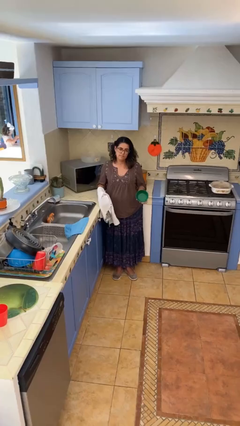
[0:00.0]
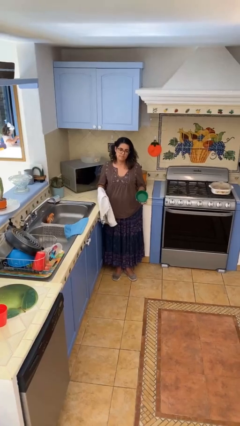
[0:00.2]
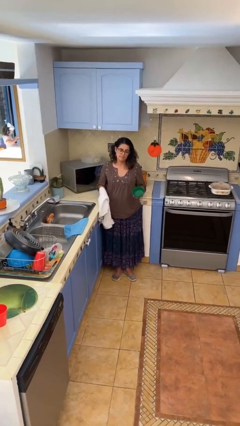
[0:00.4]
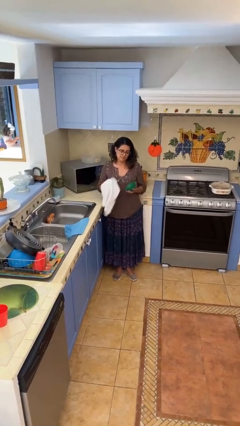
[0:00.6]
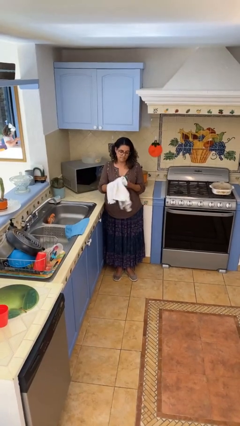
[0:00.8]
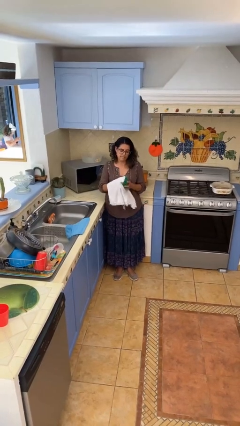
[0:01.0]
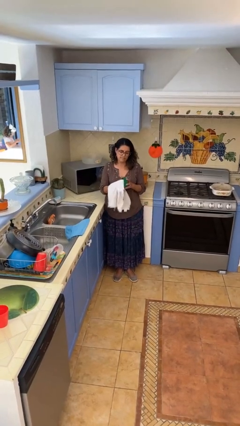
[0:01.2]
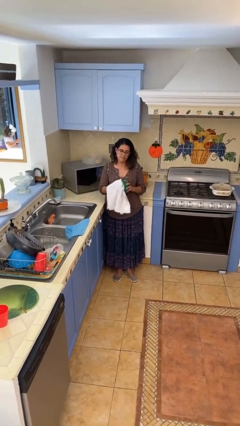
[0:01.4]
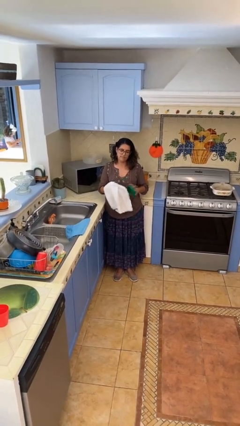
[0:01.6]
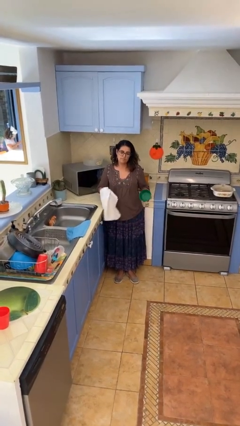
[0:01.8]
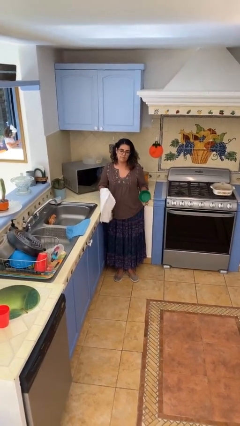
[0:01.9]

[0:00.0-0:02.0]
person dries dish

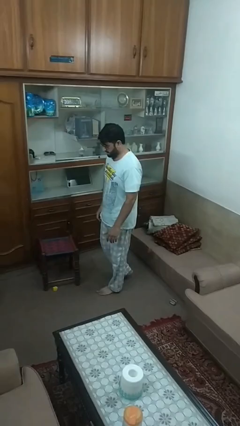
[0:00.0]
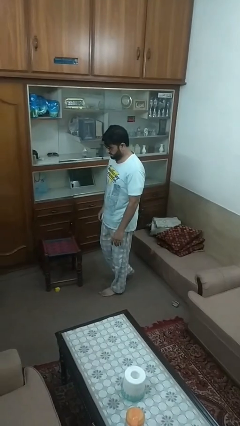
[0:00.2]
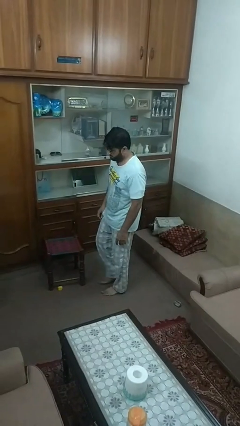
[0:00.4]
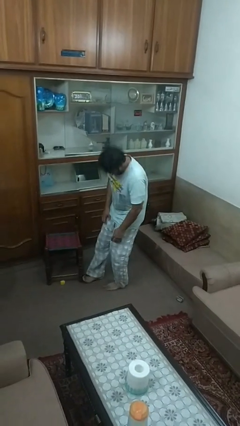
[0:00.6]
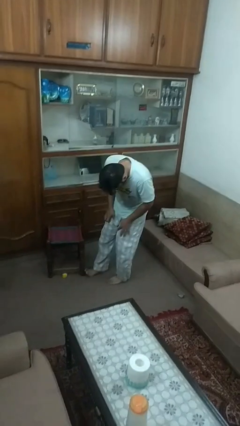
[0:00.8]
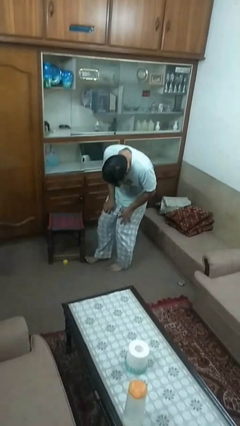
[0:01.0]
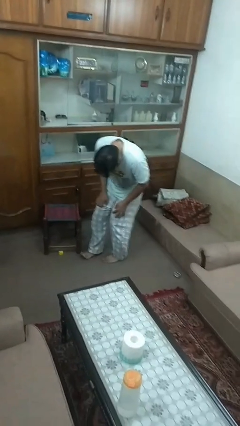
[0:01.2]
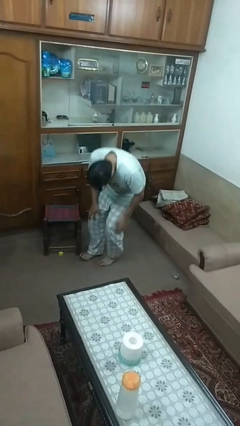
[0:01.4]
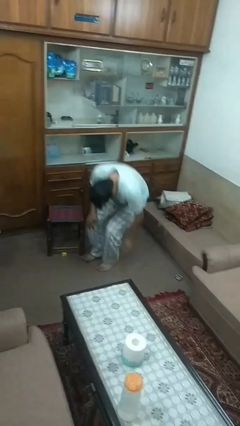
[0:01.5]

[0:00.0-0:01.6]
person trips on object on floor

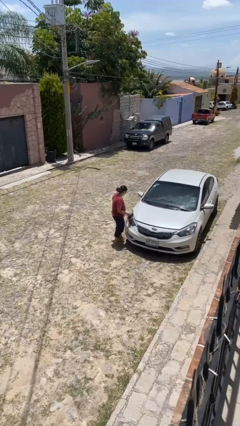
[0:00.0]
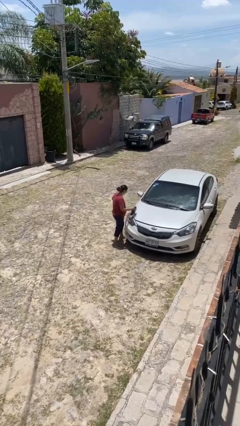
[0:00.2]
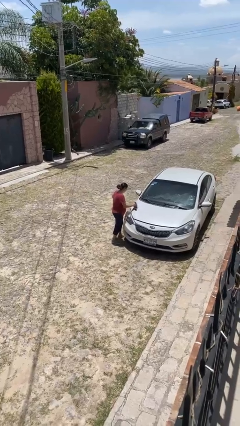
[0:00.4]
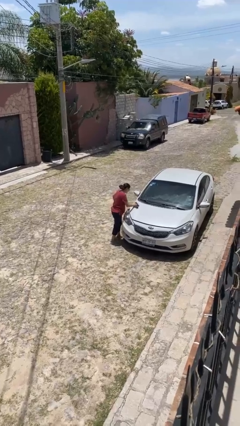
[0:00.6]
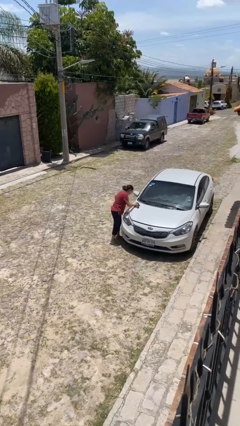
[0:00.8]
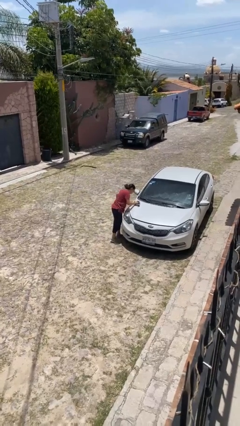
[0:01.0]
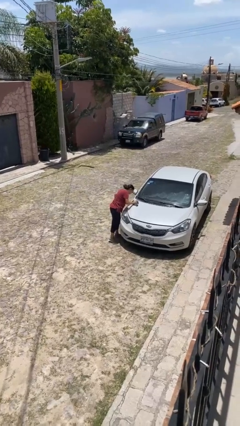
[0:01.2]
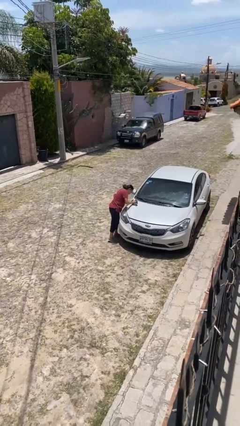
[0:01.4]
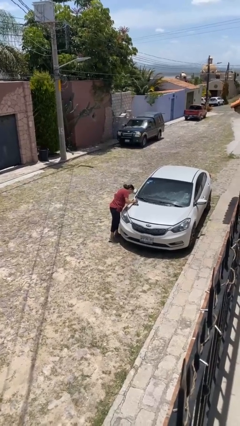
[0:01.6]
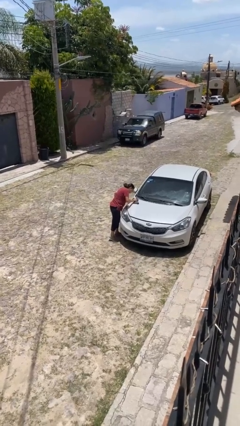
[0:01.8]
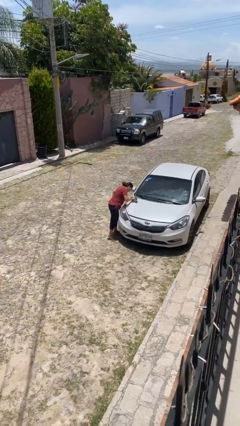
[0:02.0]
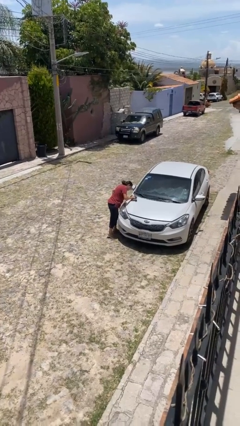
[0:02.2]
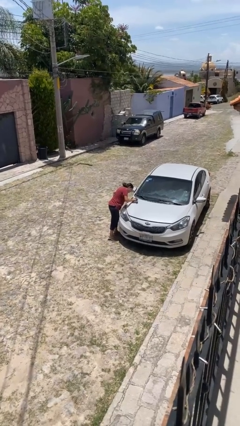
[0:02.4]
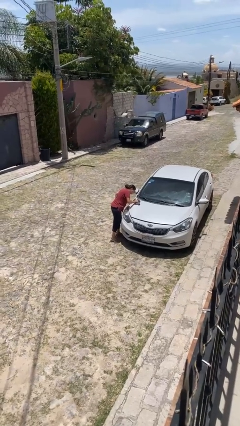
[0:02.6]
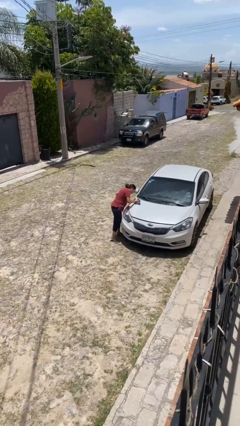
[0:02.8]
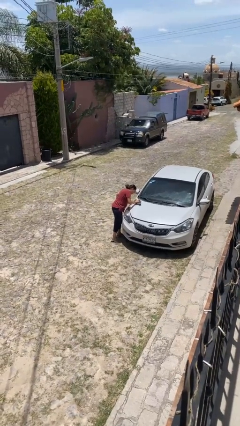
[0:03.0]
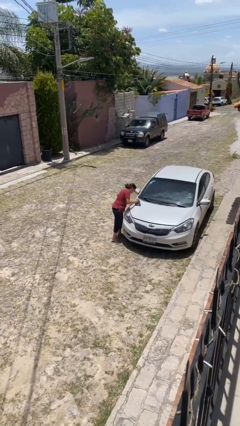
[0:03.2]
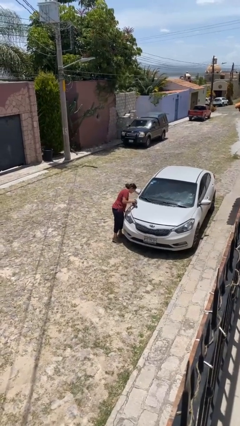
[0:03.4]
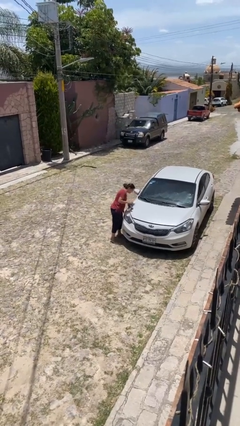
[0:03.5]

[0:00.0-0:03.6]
person polishes car with rag

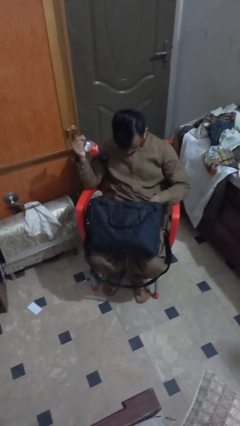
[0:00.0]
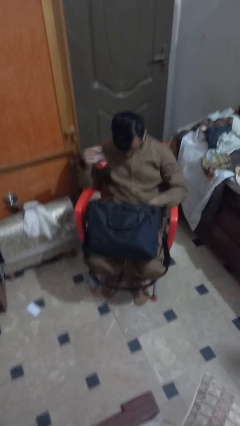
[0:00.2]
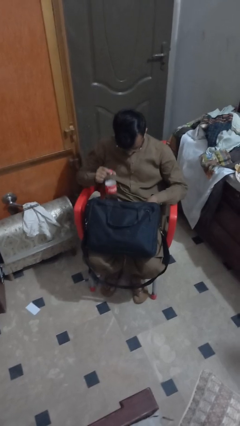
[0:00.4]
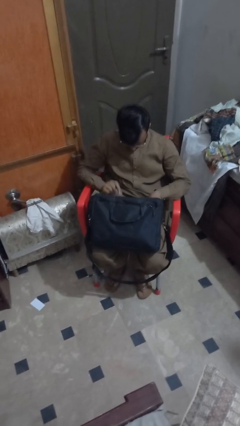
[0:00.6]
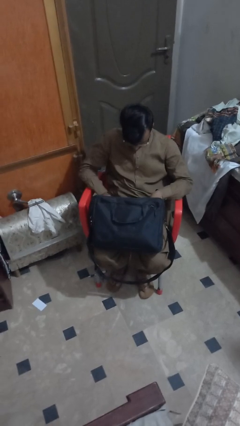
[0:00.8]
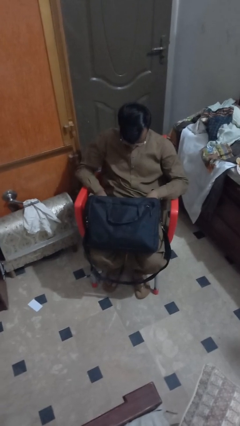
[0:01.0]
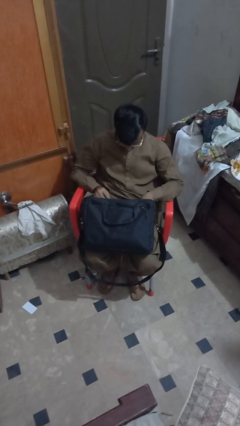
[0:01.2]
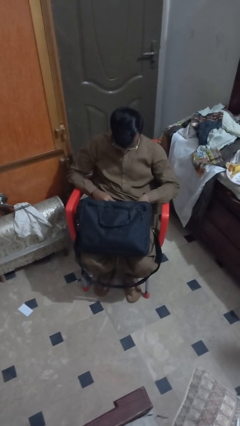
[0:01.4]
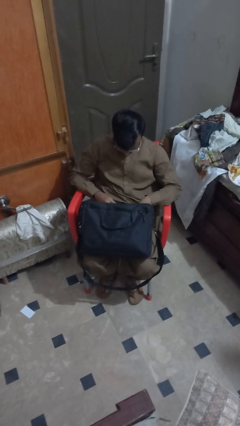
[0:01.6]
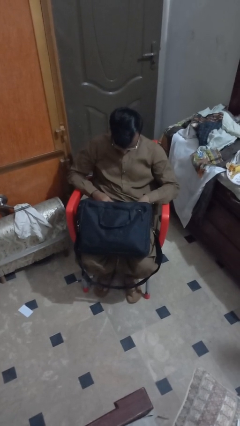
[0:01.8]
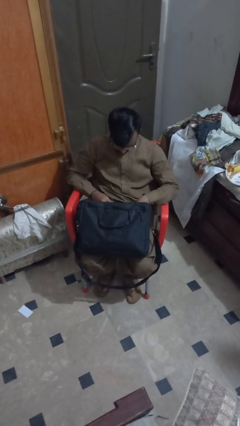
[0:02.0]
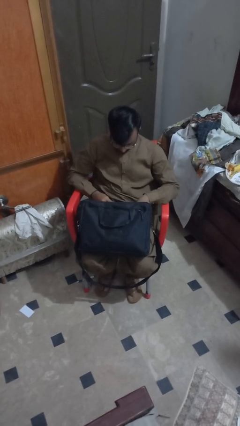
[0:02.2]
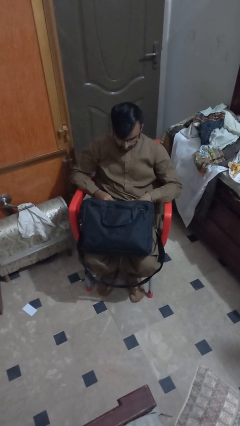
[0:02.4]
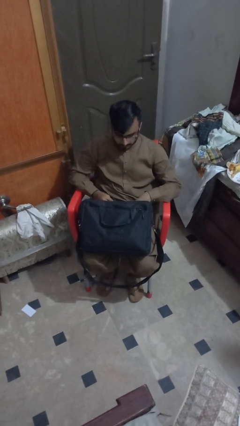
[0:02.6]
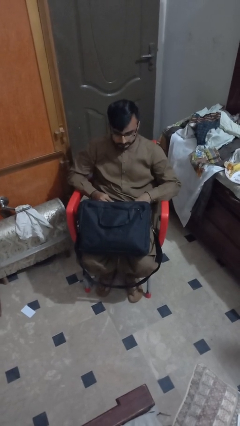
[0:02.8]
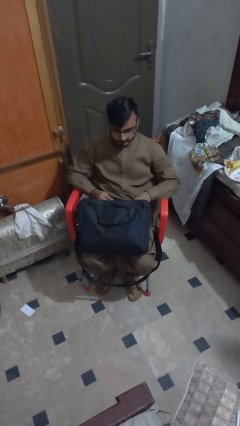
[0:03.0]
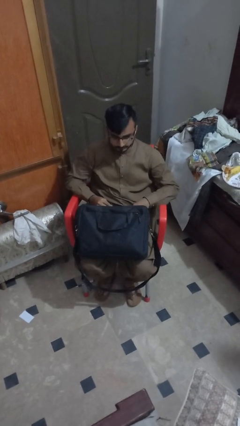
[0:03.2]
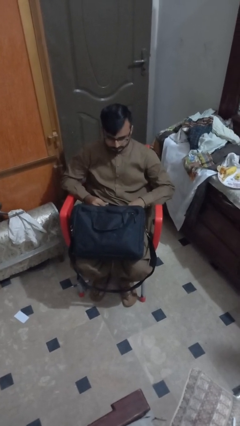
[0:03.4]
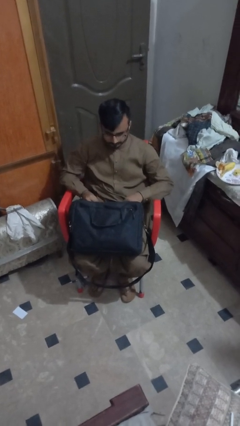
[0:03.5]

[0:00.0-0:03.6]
person puts object into bag

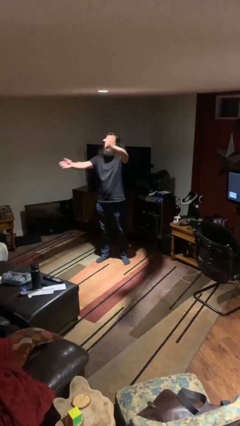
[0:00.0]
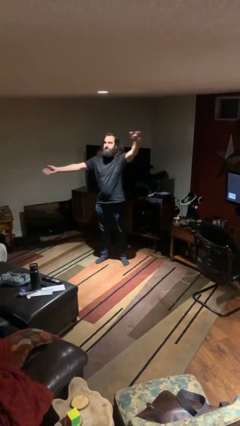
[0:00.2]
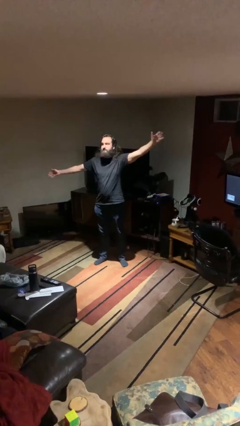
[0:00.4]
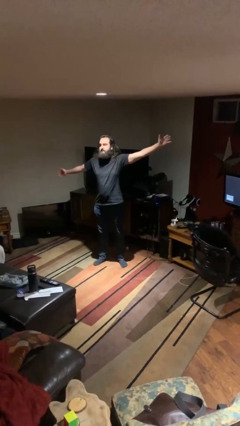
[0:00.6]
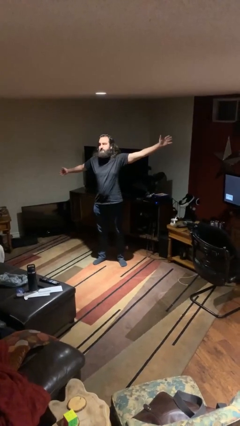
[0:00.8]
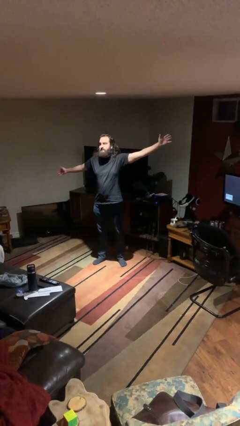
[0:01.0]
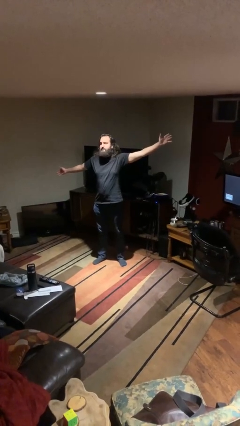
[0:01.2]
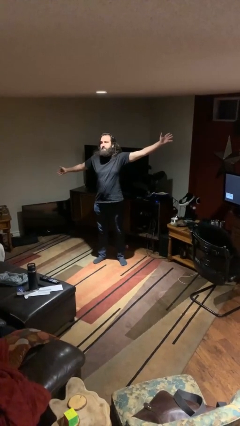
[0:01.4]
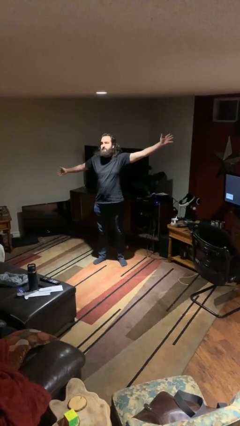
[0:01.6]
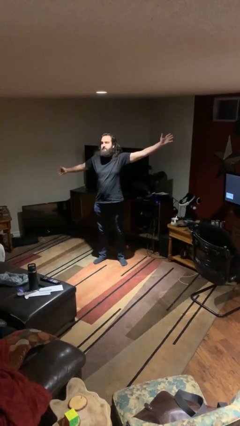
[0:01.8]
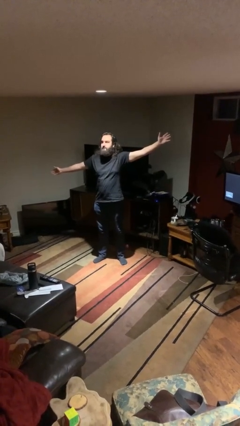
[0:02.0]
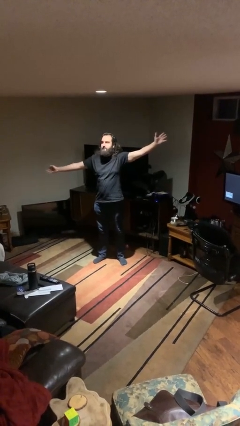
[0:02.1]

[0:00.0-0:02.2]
person gestures zoom out

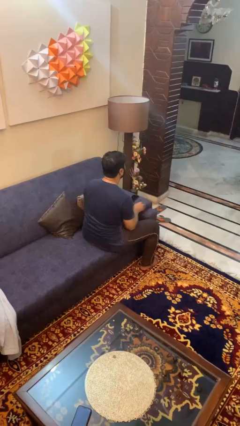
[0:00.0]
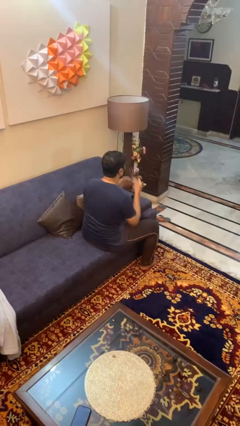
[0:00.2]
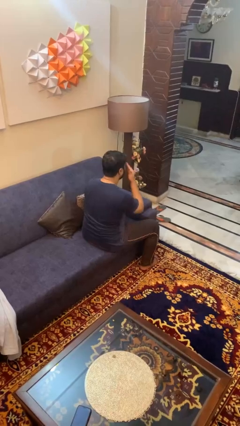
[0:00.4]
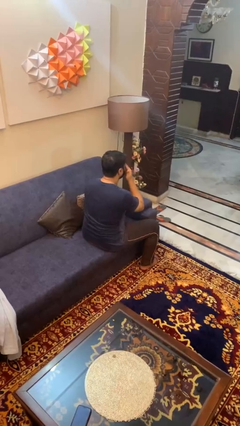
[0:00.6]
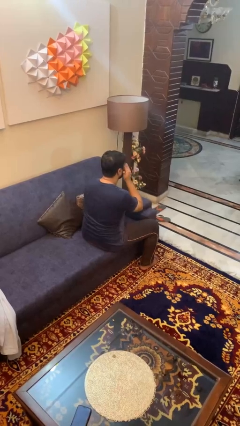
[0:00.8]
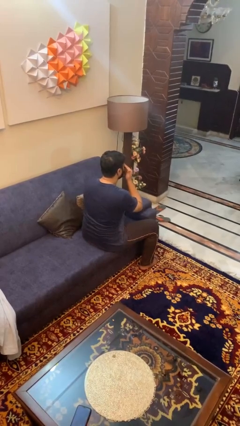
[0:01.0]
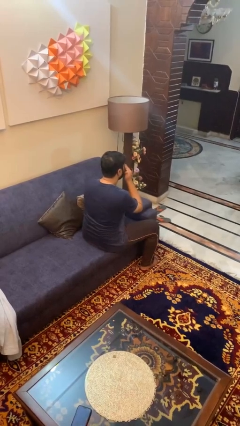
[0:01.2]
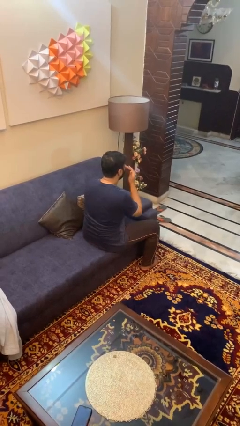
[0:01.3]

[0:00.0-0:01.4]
person rubs eyes

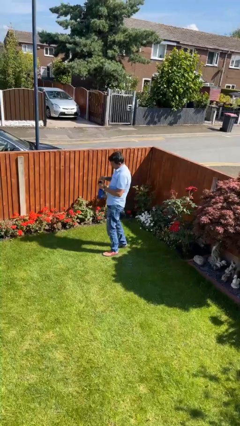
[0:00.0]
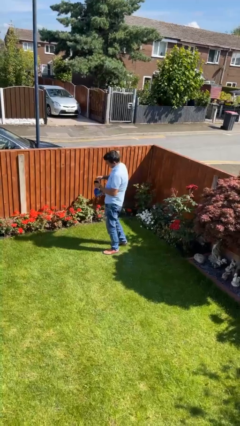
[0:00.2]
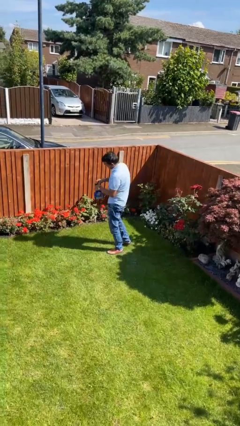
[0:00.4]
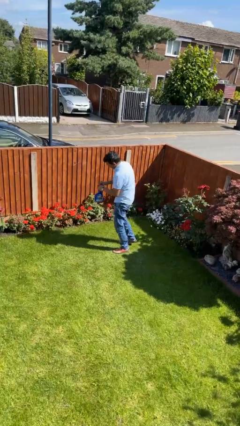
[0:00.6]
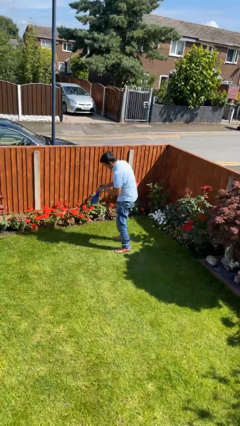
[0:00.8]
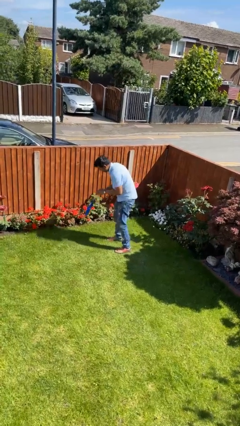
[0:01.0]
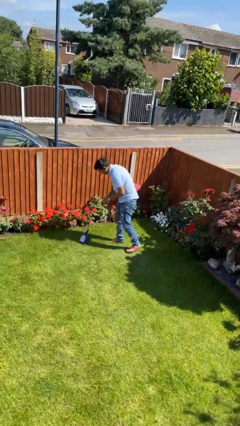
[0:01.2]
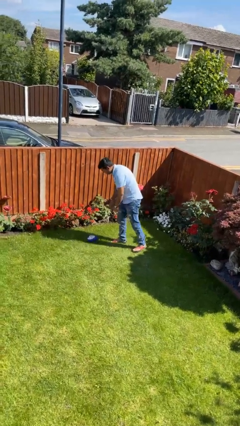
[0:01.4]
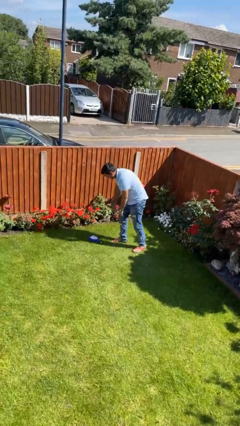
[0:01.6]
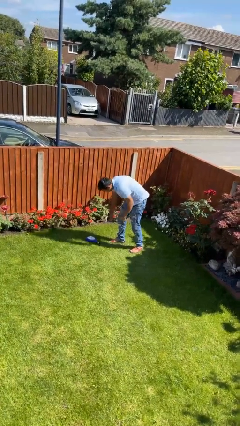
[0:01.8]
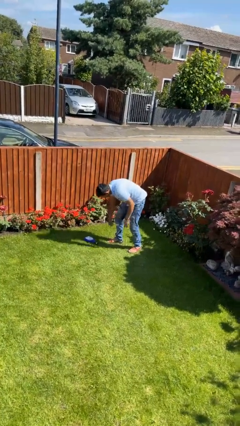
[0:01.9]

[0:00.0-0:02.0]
person drops object

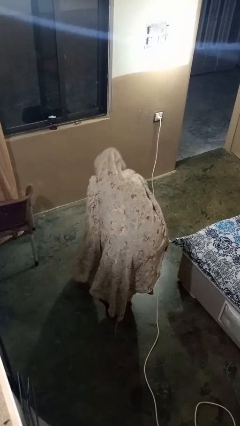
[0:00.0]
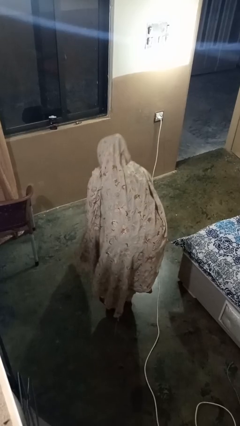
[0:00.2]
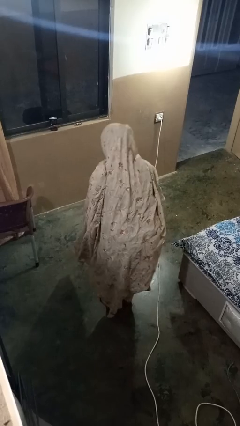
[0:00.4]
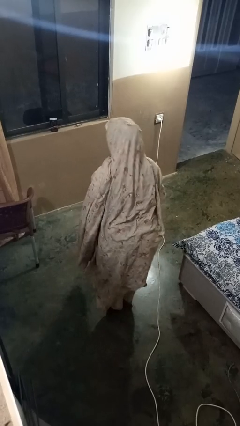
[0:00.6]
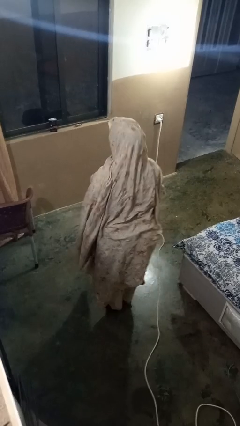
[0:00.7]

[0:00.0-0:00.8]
person bows
